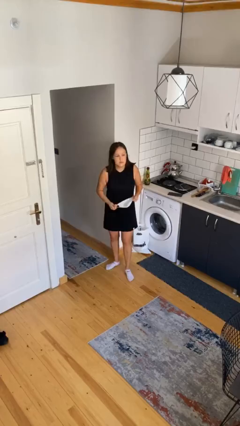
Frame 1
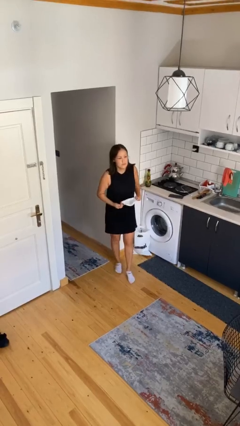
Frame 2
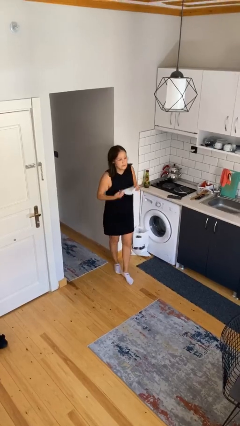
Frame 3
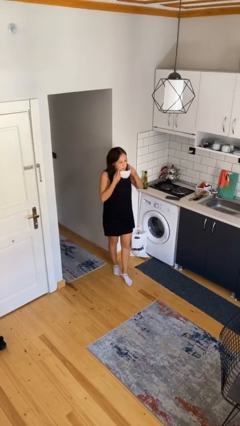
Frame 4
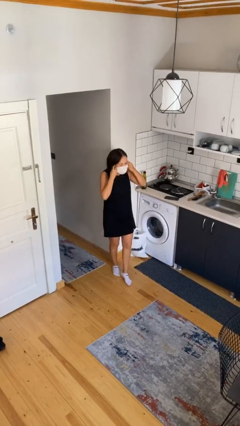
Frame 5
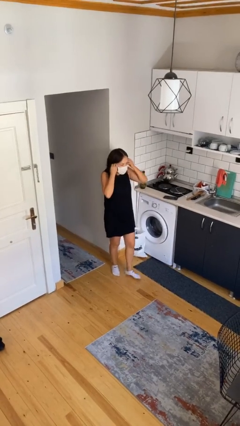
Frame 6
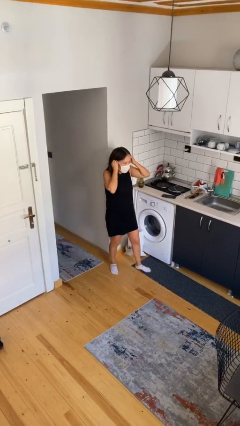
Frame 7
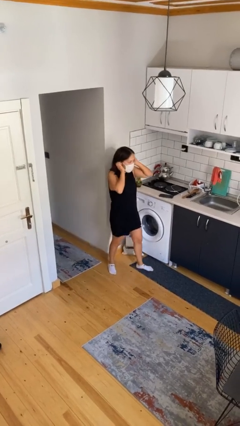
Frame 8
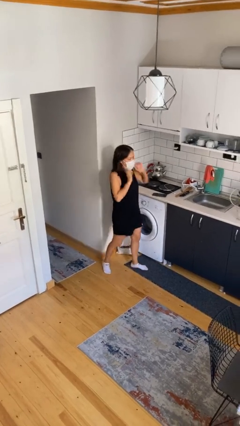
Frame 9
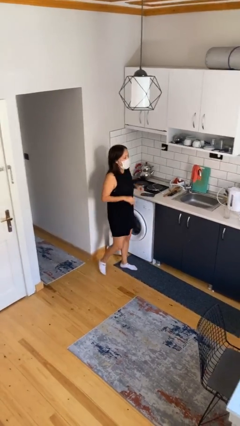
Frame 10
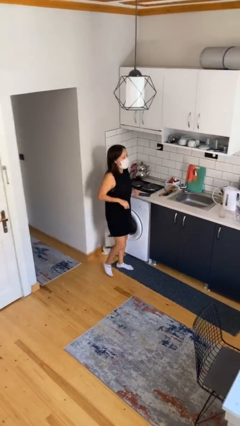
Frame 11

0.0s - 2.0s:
person puts on facemask

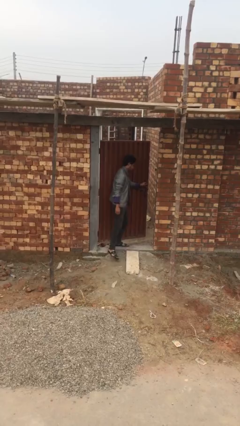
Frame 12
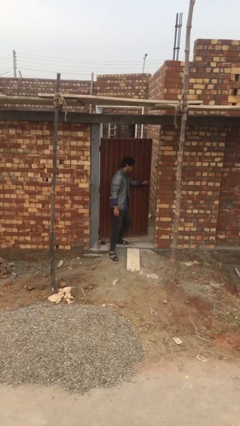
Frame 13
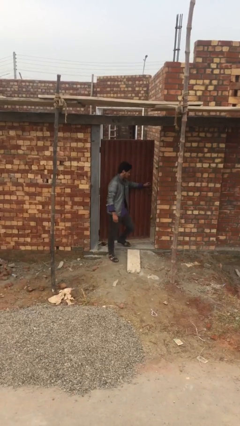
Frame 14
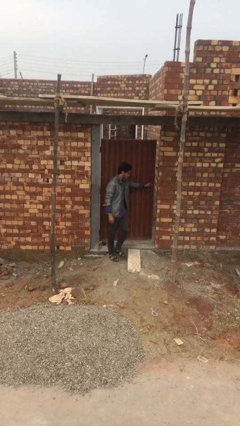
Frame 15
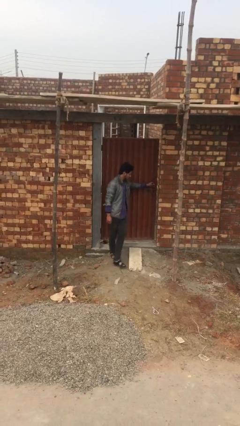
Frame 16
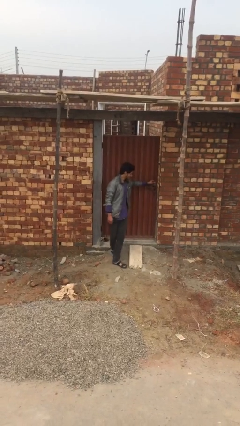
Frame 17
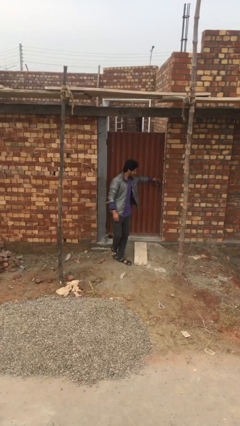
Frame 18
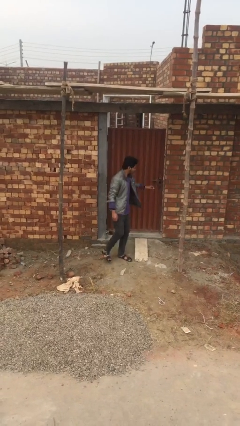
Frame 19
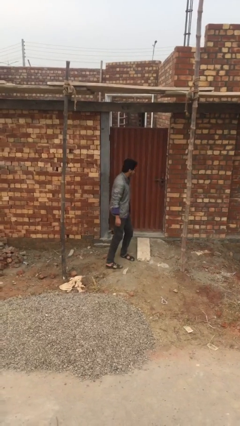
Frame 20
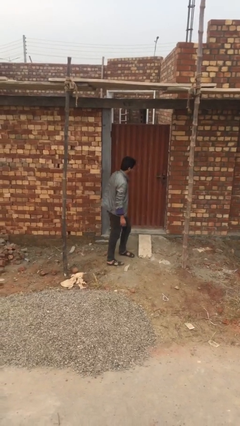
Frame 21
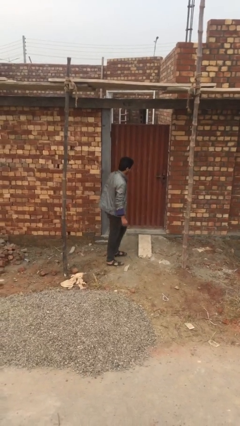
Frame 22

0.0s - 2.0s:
person closes facility door

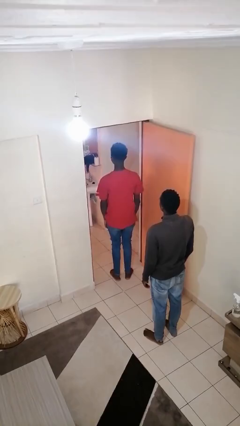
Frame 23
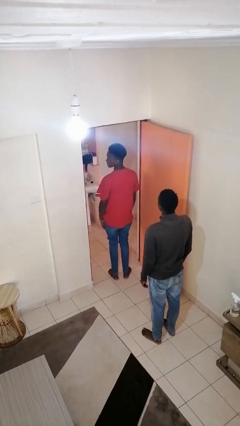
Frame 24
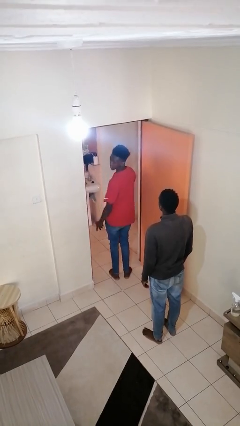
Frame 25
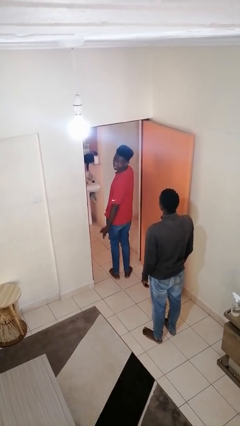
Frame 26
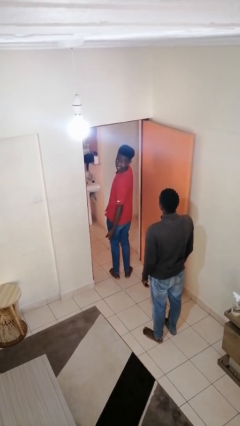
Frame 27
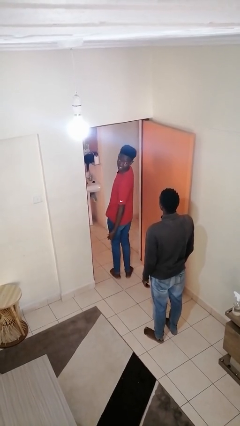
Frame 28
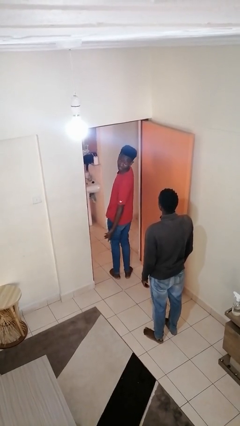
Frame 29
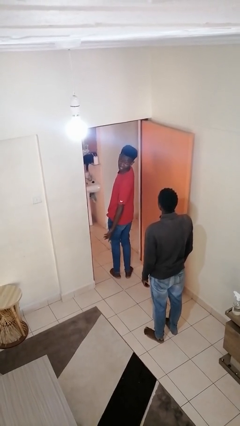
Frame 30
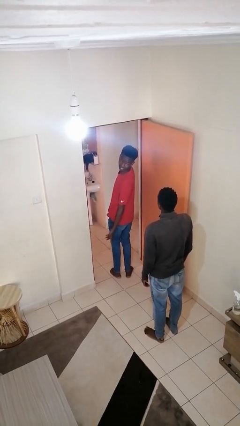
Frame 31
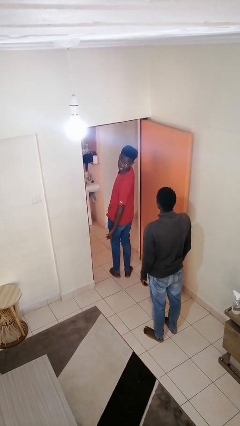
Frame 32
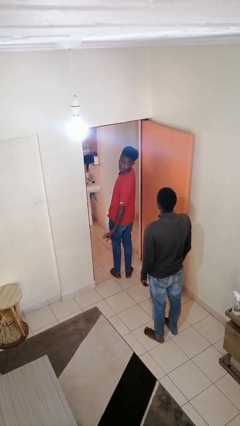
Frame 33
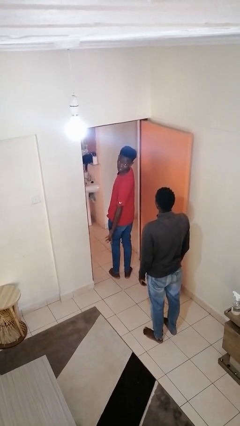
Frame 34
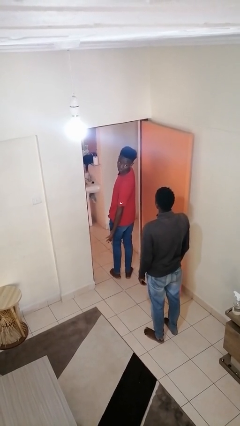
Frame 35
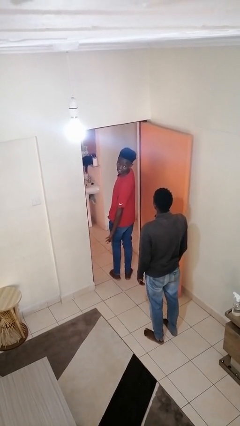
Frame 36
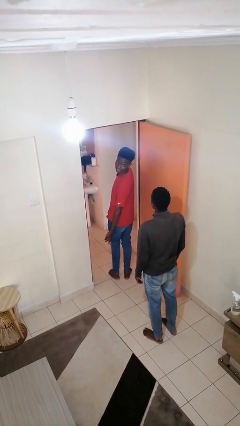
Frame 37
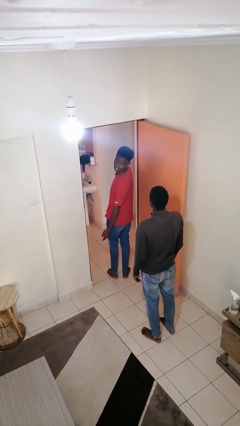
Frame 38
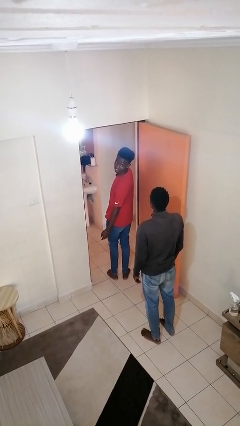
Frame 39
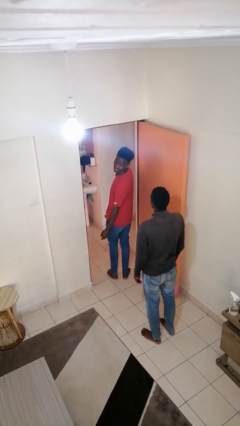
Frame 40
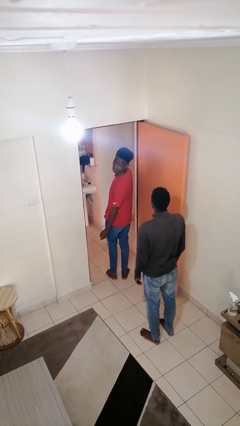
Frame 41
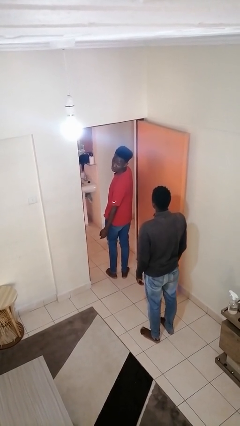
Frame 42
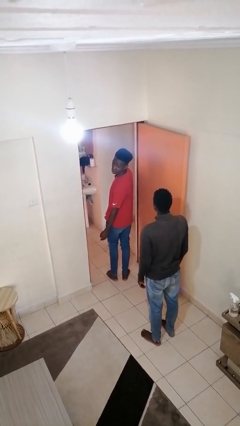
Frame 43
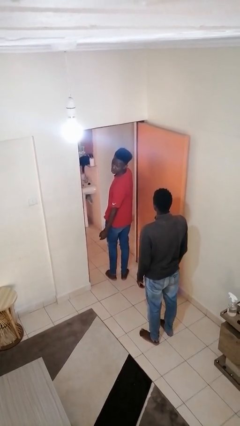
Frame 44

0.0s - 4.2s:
person looks over shoulder

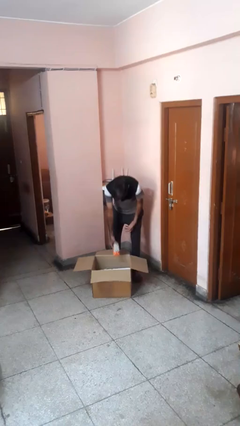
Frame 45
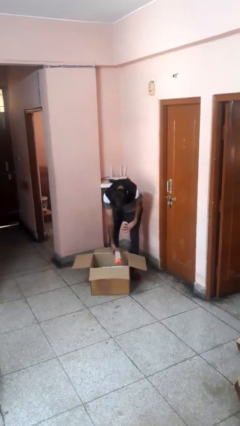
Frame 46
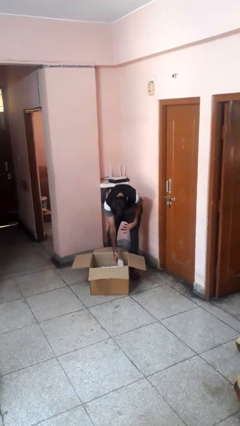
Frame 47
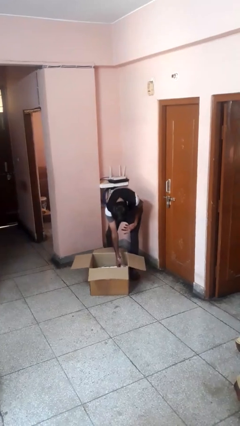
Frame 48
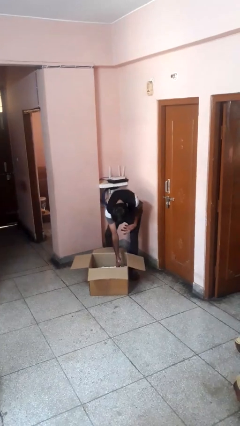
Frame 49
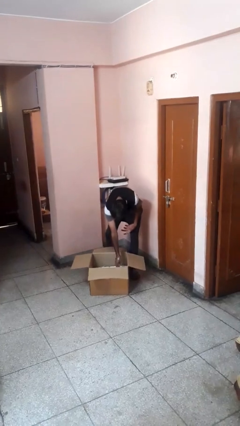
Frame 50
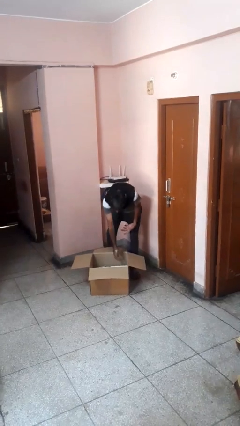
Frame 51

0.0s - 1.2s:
person puts object into box

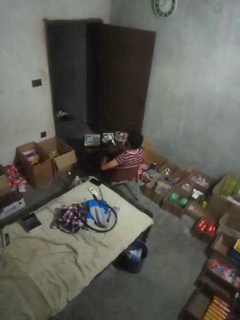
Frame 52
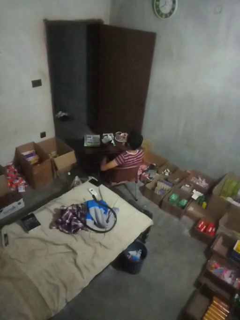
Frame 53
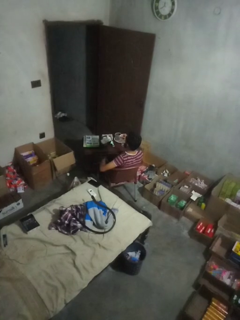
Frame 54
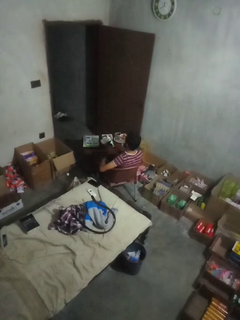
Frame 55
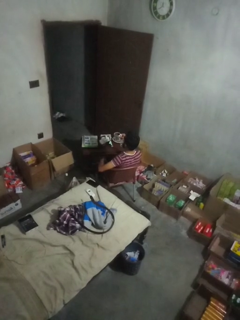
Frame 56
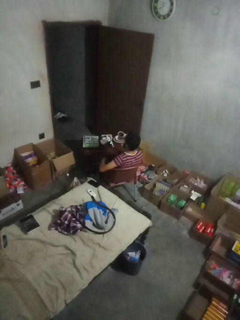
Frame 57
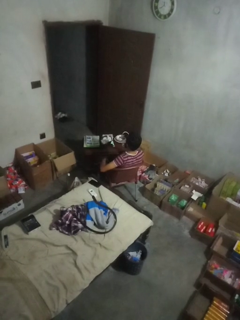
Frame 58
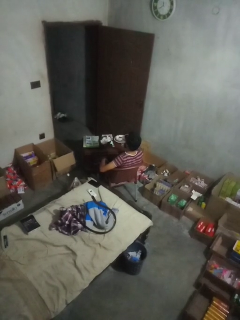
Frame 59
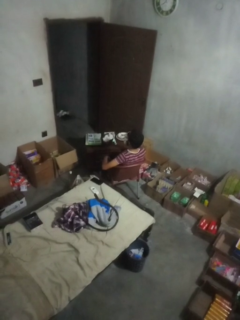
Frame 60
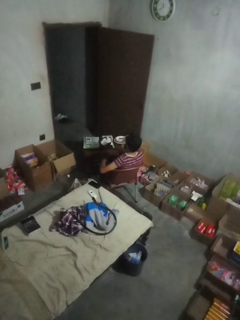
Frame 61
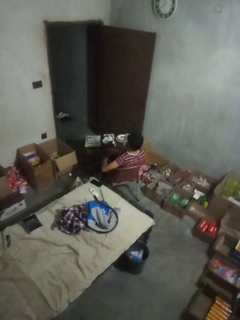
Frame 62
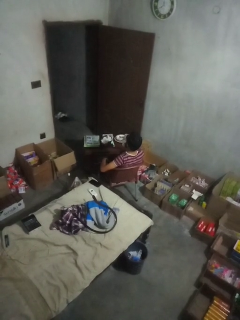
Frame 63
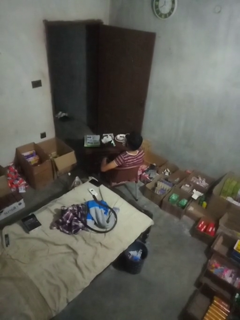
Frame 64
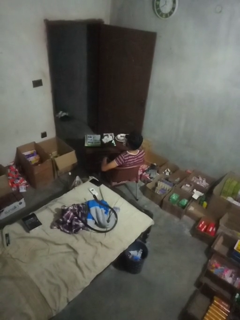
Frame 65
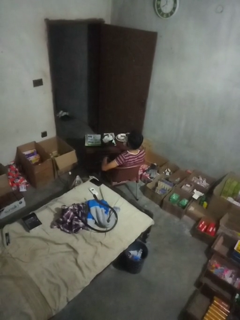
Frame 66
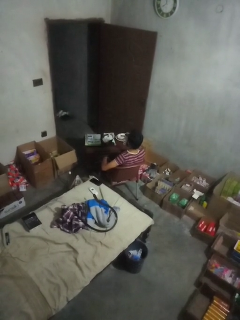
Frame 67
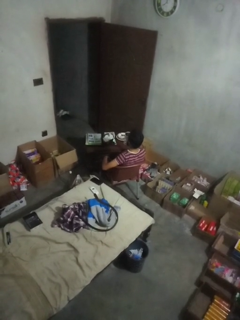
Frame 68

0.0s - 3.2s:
person drinks from mug

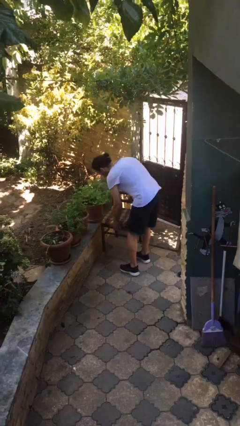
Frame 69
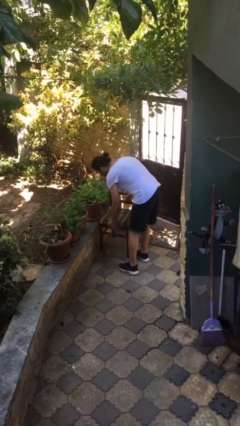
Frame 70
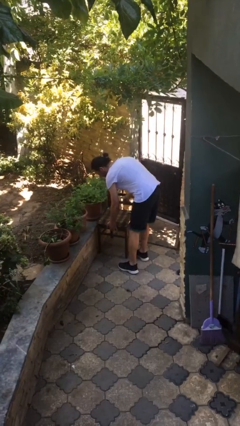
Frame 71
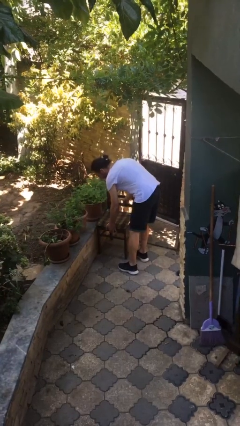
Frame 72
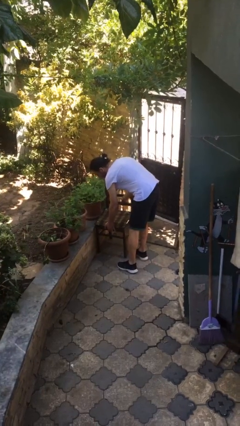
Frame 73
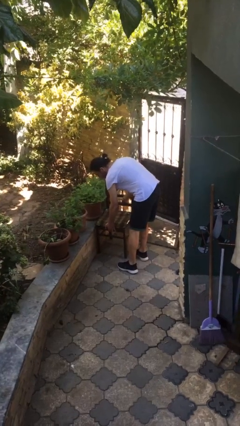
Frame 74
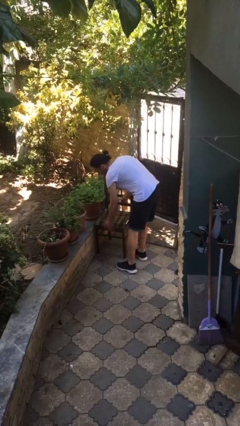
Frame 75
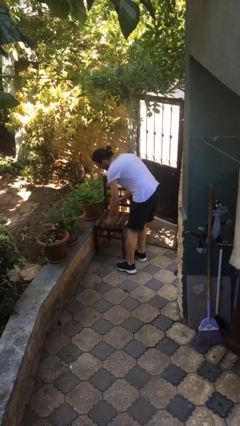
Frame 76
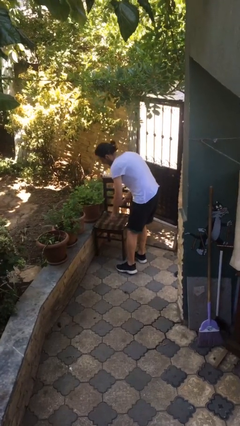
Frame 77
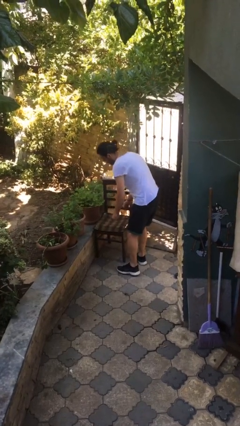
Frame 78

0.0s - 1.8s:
person puts down object on floor

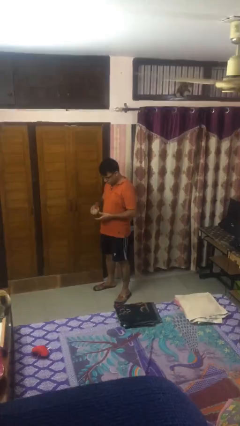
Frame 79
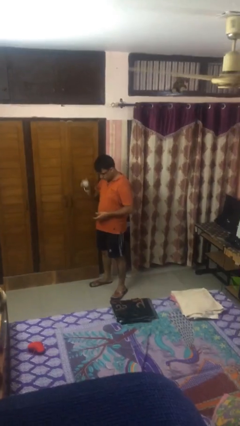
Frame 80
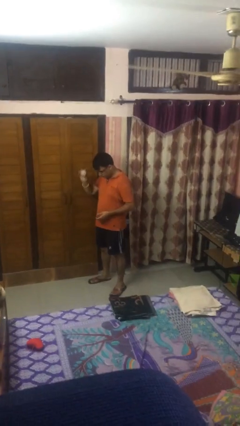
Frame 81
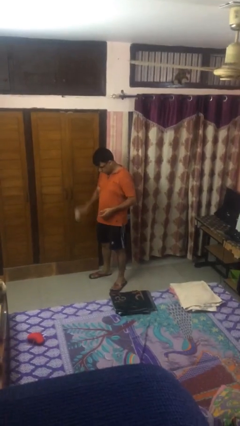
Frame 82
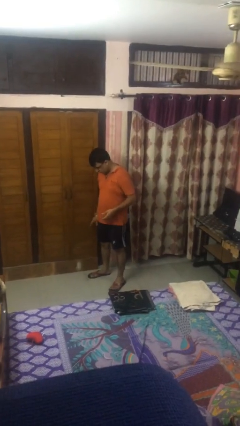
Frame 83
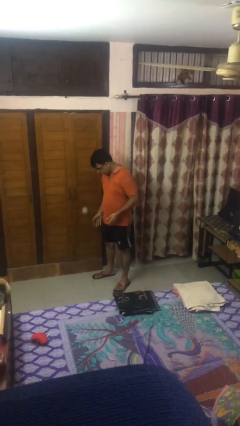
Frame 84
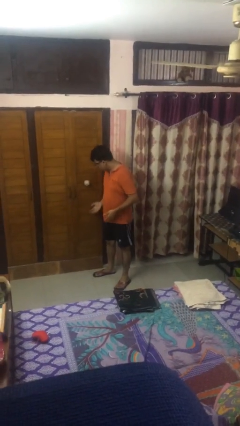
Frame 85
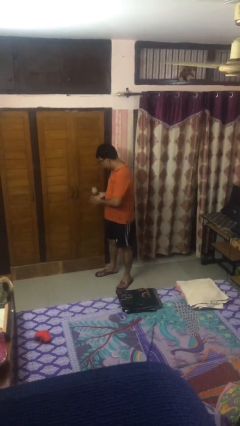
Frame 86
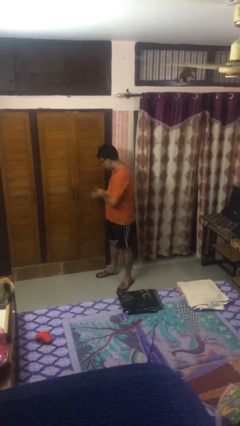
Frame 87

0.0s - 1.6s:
person bounces ball on floor

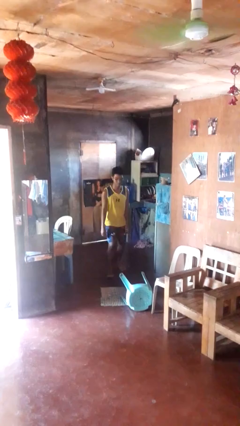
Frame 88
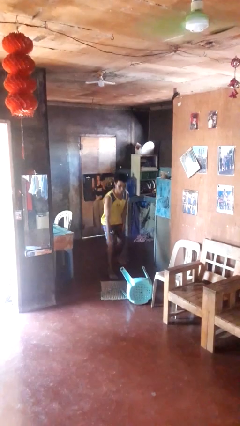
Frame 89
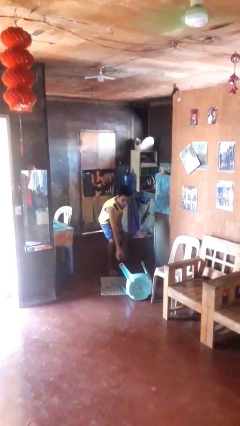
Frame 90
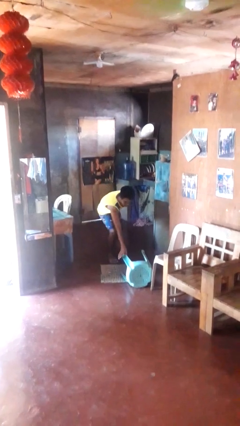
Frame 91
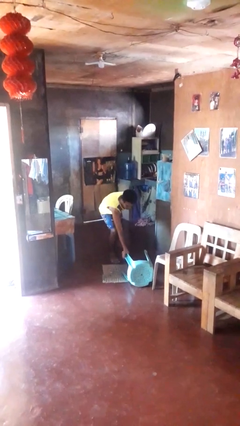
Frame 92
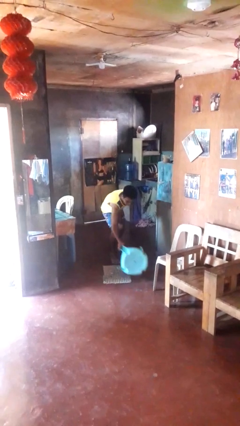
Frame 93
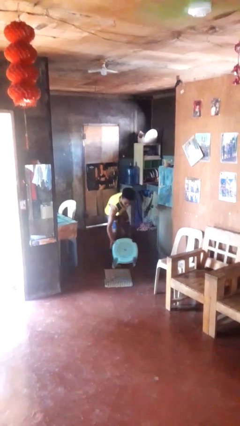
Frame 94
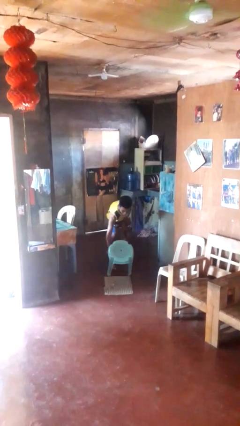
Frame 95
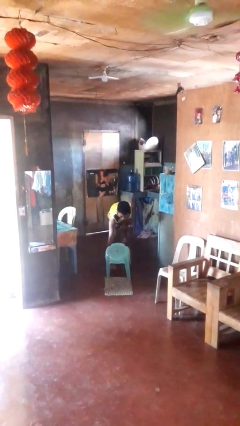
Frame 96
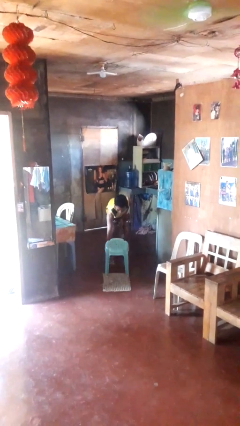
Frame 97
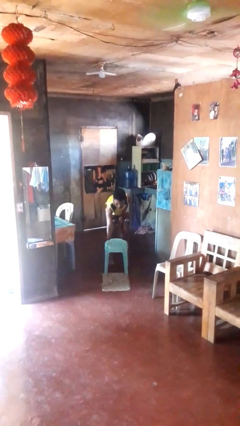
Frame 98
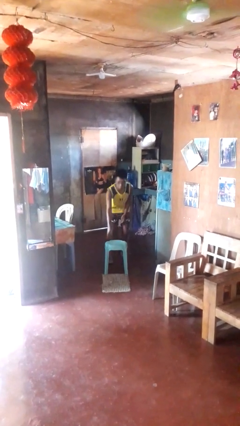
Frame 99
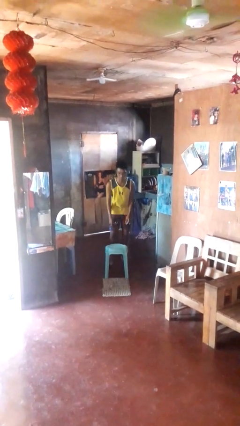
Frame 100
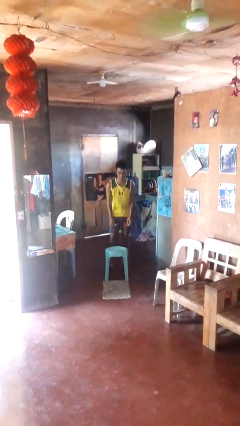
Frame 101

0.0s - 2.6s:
person sets upright furniture
